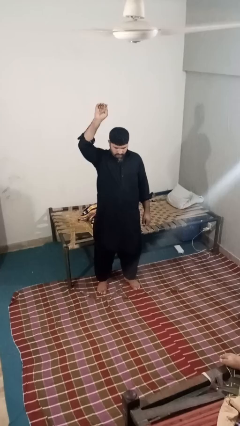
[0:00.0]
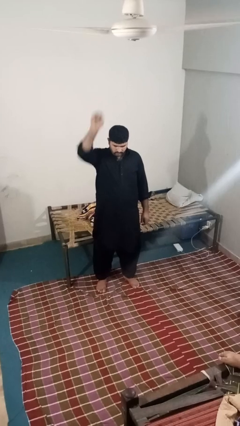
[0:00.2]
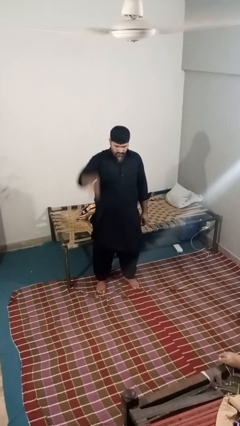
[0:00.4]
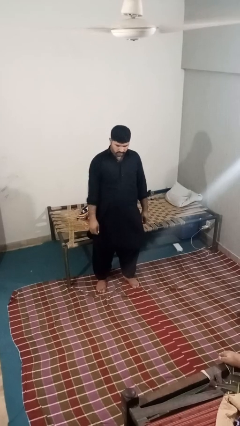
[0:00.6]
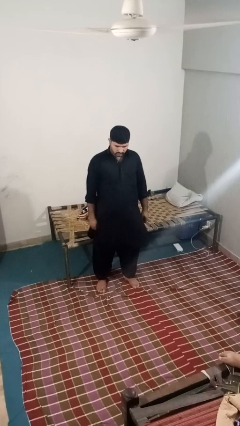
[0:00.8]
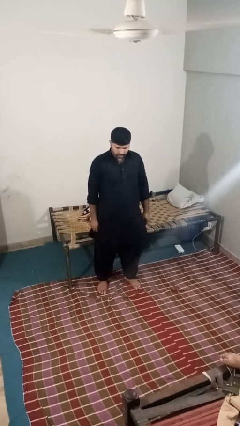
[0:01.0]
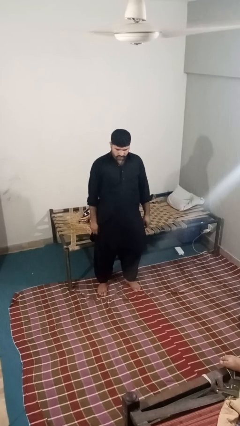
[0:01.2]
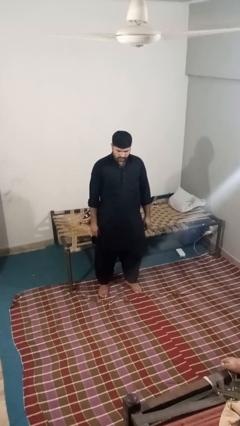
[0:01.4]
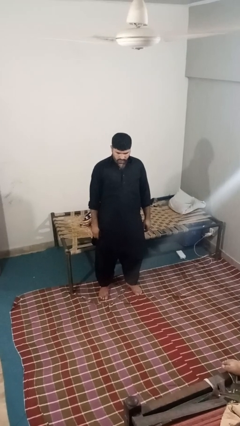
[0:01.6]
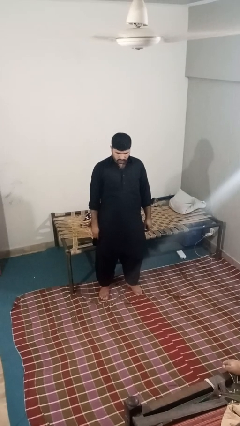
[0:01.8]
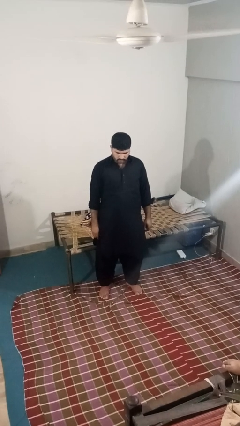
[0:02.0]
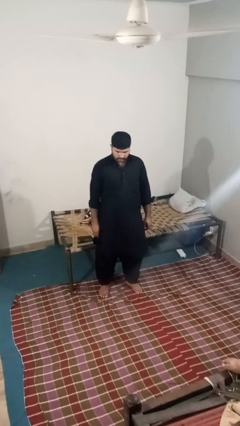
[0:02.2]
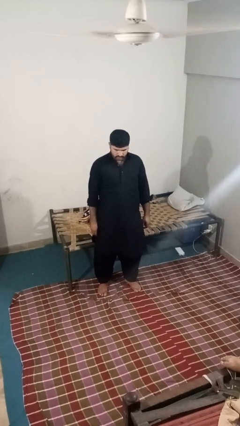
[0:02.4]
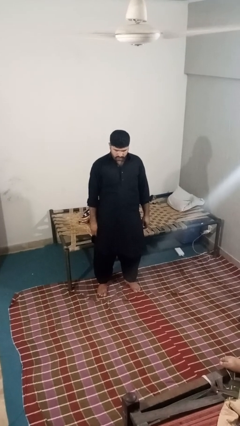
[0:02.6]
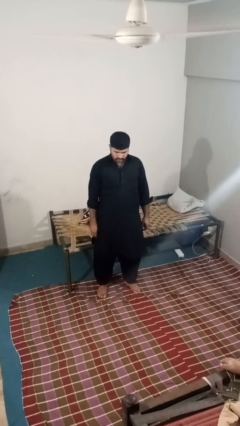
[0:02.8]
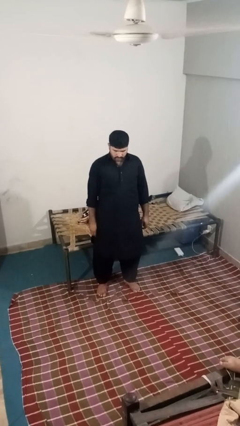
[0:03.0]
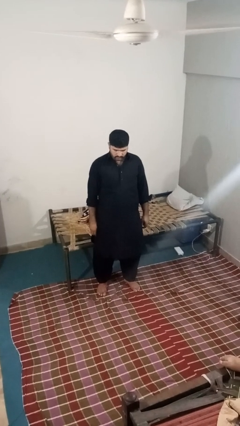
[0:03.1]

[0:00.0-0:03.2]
person gestures swipe down

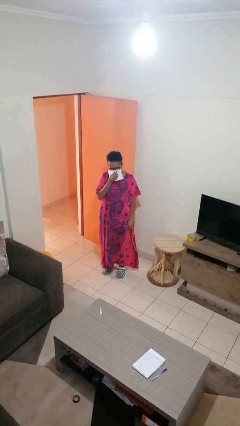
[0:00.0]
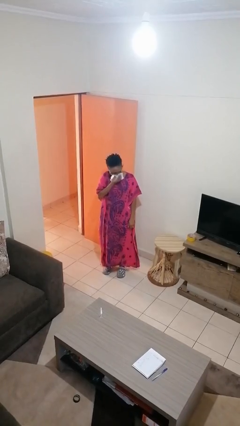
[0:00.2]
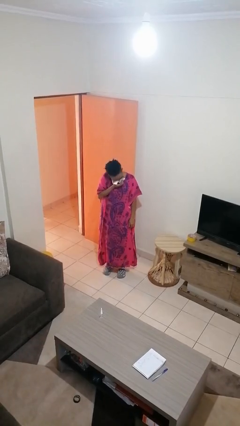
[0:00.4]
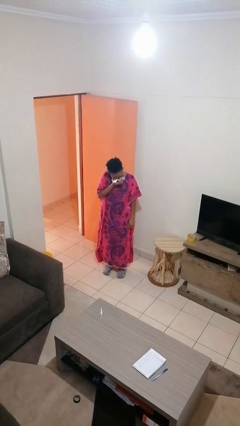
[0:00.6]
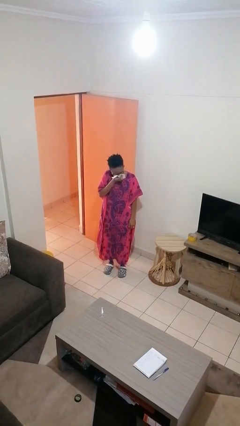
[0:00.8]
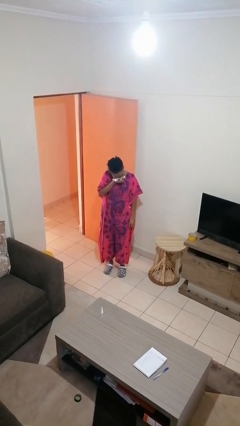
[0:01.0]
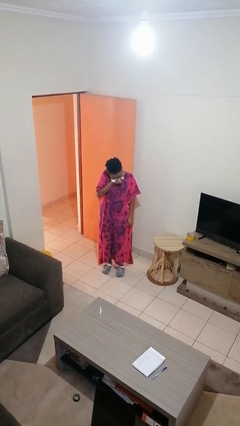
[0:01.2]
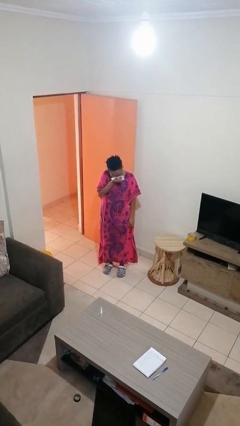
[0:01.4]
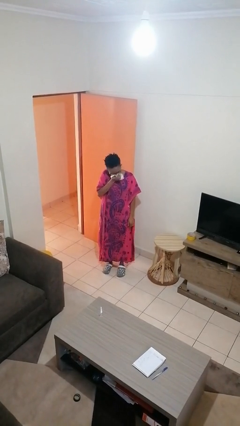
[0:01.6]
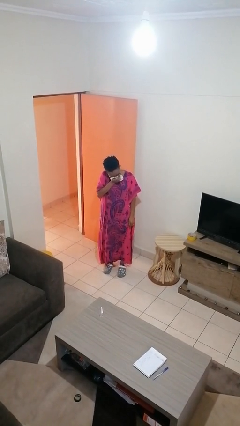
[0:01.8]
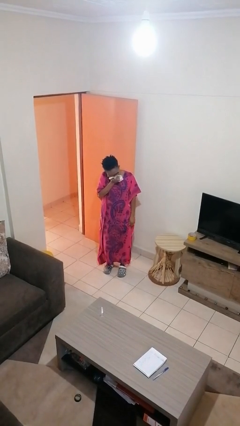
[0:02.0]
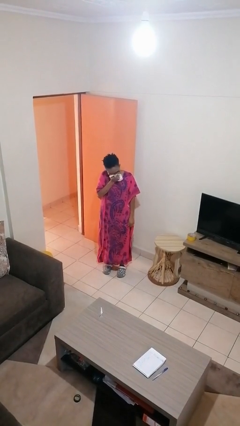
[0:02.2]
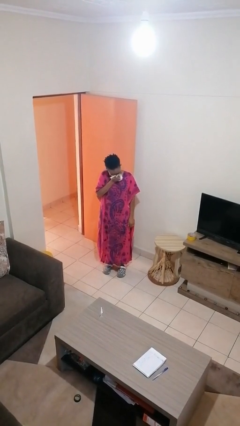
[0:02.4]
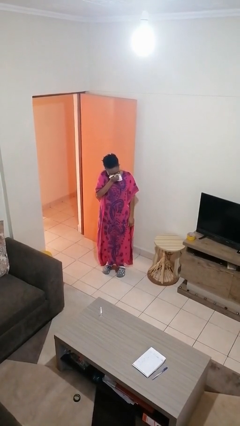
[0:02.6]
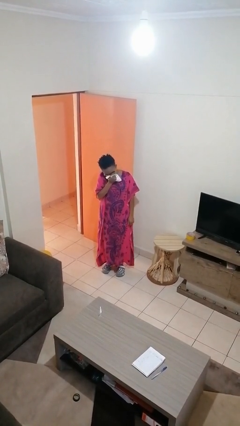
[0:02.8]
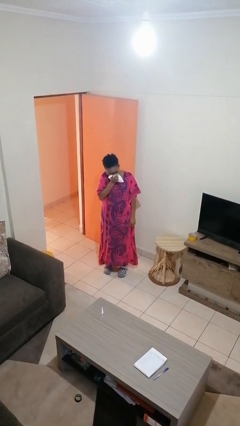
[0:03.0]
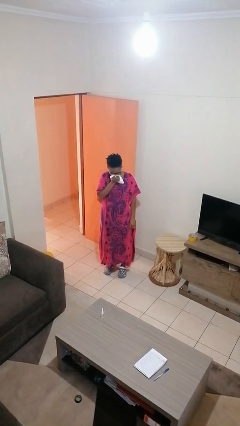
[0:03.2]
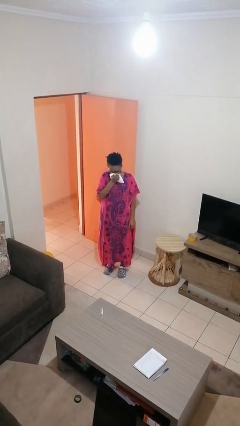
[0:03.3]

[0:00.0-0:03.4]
person blows nose

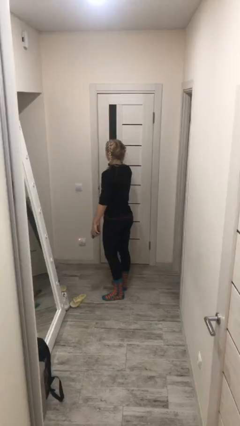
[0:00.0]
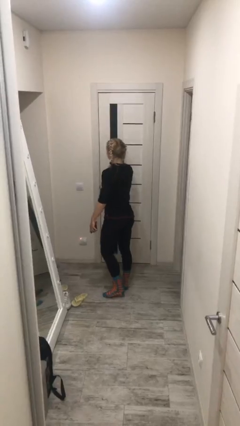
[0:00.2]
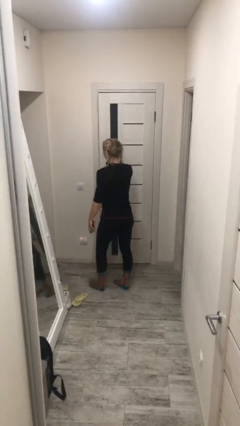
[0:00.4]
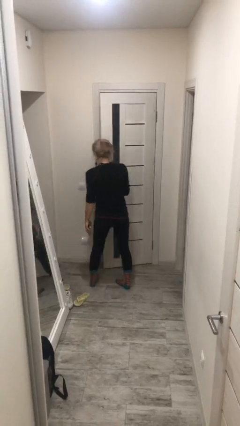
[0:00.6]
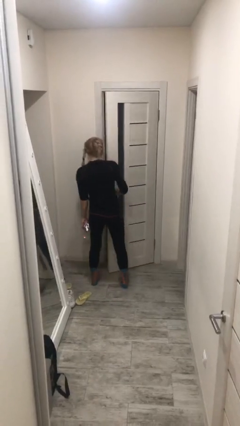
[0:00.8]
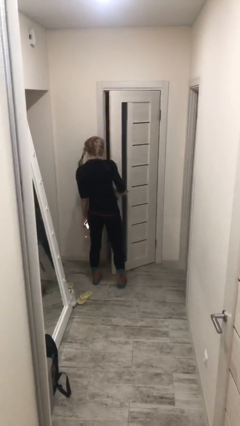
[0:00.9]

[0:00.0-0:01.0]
person opens facility door

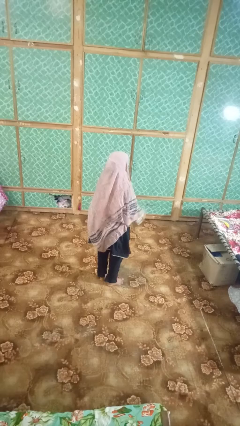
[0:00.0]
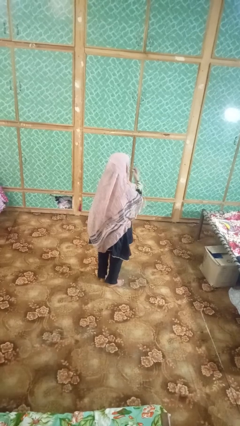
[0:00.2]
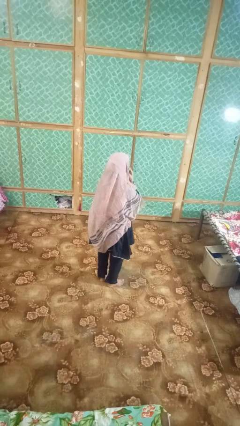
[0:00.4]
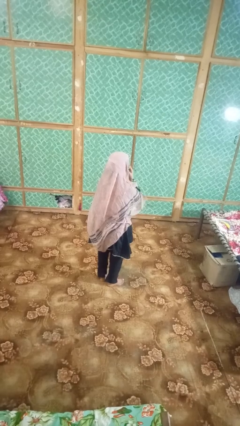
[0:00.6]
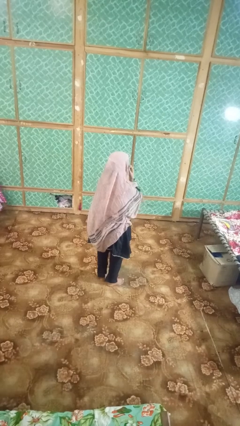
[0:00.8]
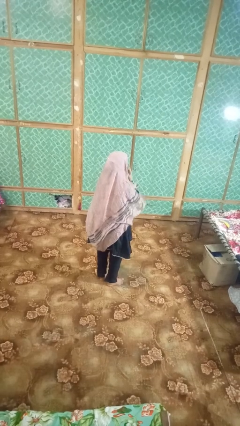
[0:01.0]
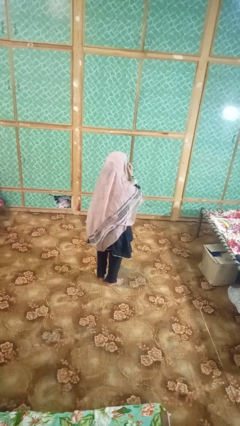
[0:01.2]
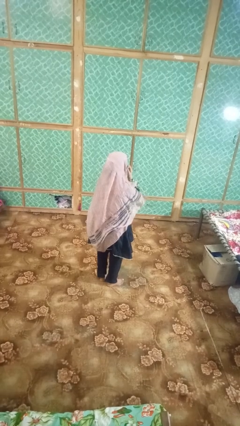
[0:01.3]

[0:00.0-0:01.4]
person strokes chin

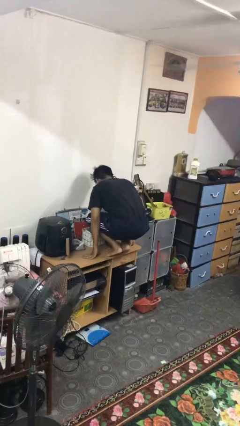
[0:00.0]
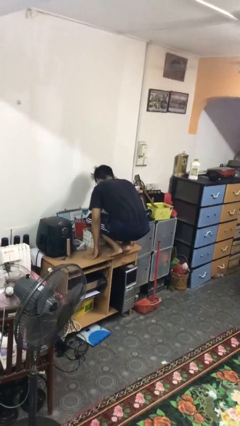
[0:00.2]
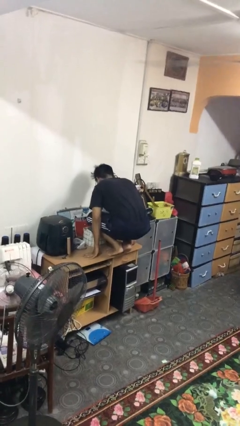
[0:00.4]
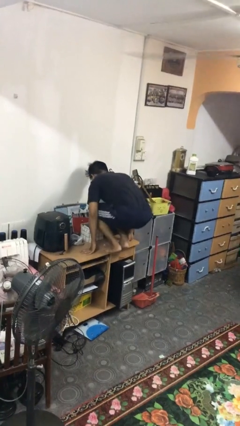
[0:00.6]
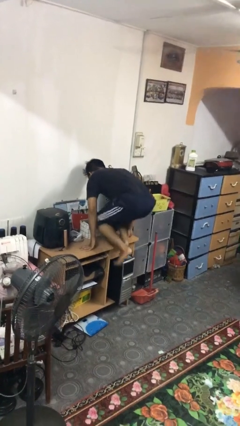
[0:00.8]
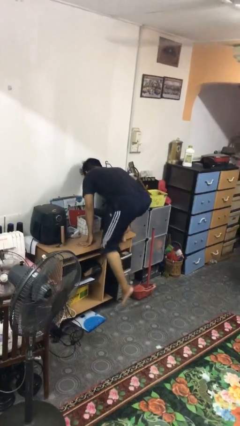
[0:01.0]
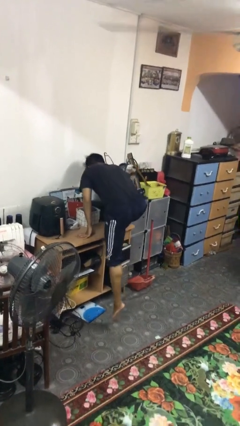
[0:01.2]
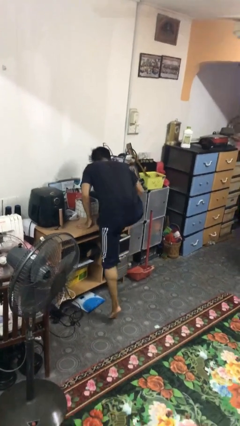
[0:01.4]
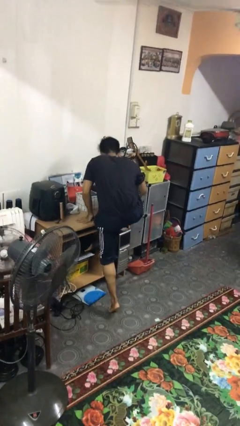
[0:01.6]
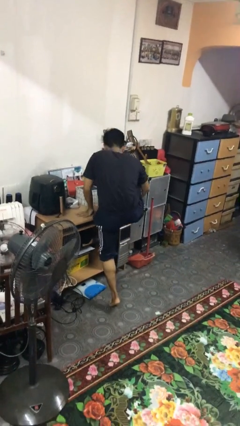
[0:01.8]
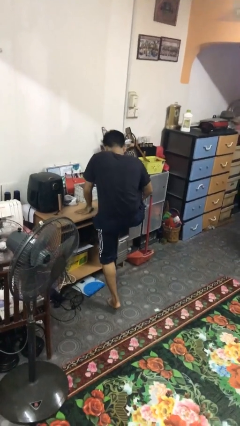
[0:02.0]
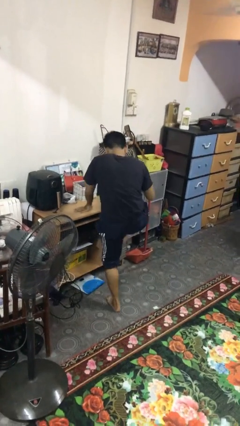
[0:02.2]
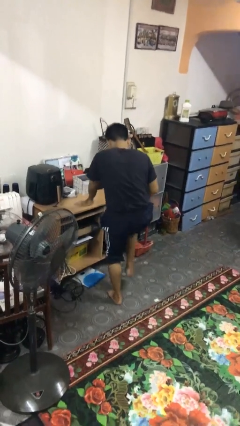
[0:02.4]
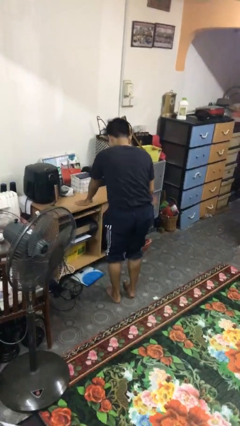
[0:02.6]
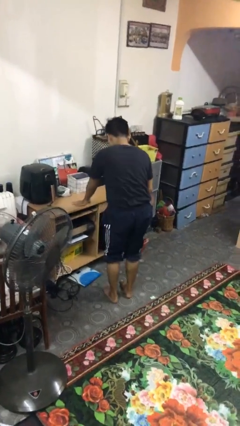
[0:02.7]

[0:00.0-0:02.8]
person climbs off table

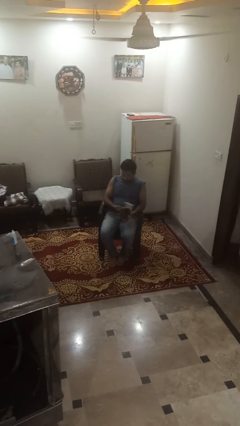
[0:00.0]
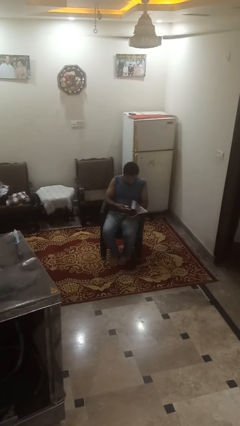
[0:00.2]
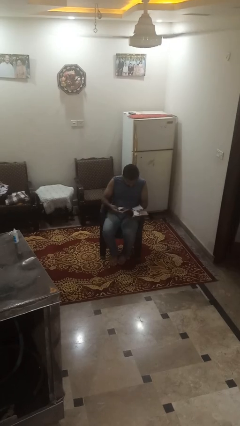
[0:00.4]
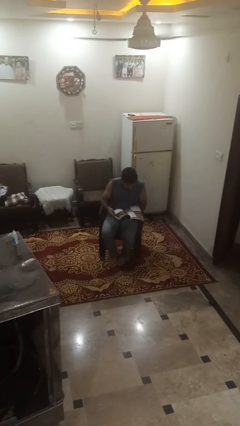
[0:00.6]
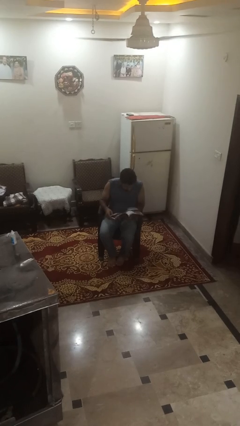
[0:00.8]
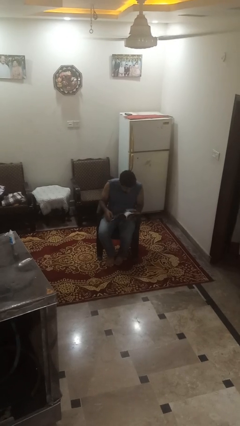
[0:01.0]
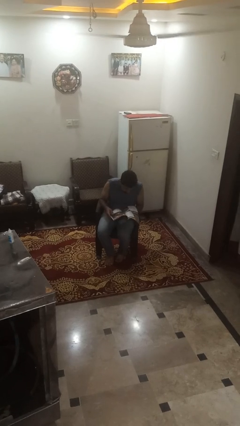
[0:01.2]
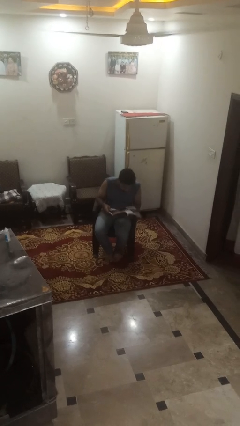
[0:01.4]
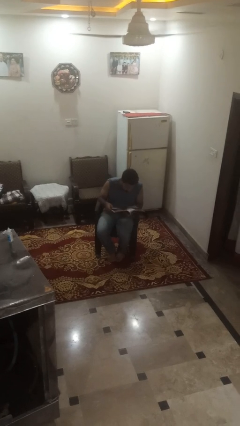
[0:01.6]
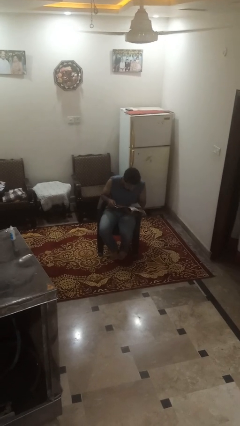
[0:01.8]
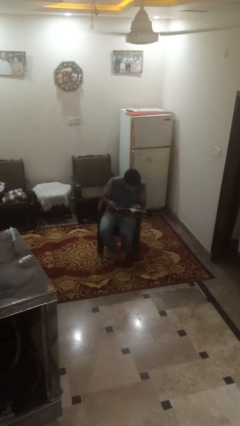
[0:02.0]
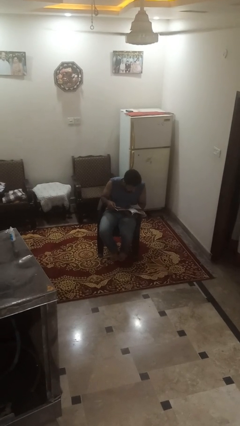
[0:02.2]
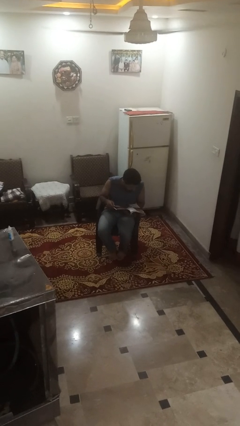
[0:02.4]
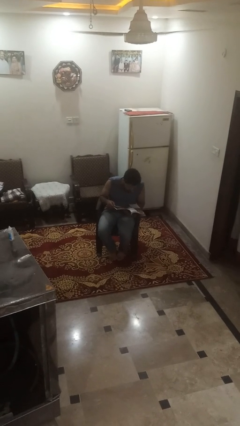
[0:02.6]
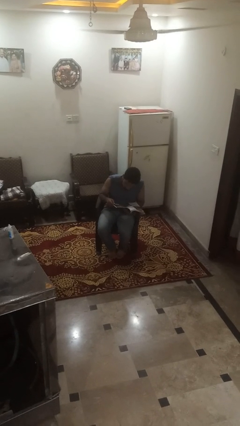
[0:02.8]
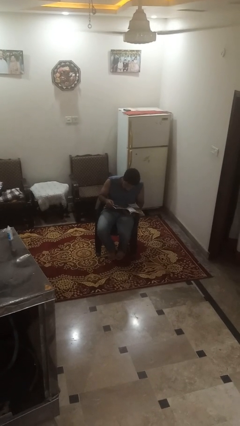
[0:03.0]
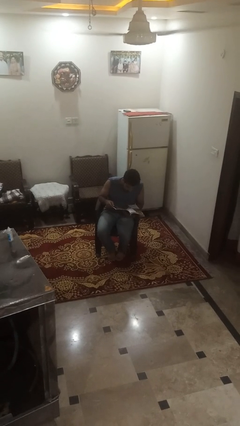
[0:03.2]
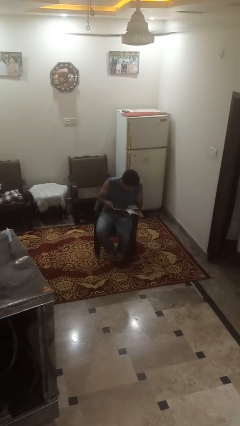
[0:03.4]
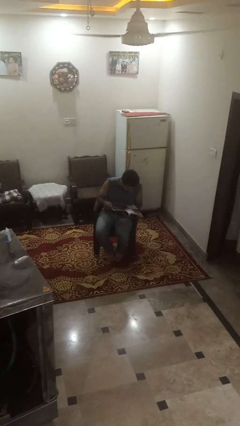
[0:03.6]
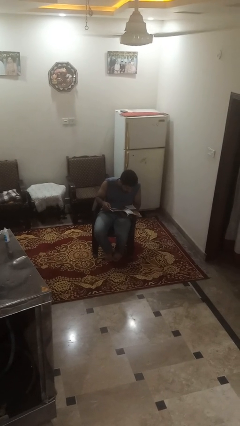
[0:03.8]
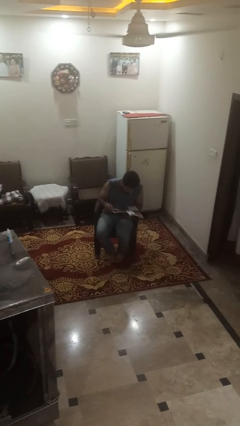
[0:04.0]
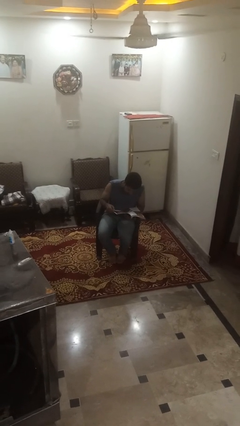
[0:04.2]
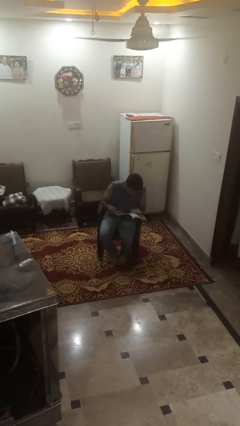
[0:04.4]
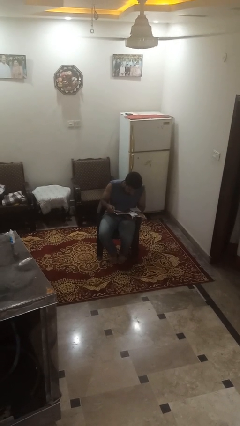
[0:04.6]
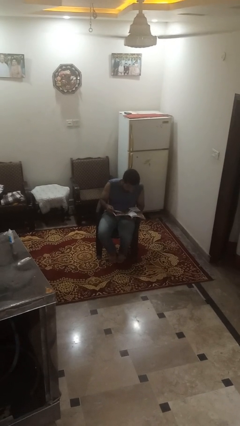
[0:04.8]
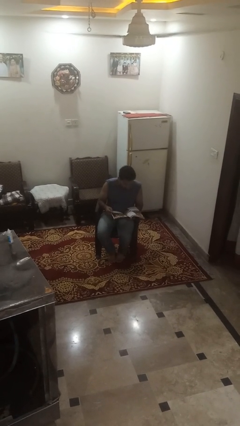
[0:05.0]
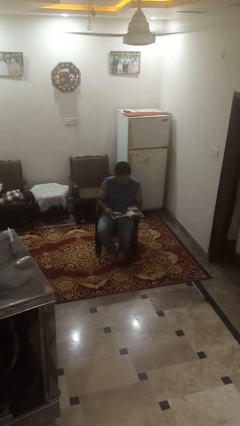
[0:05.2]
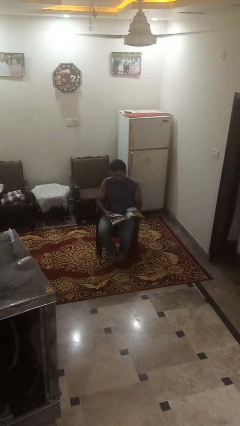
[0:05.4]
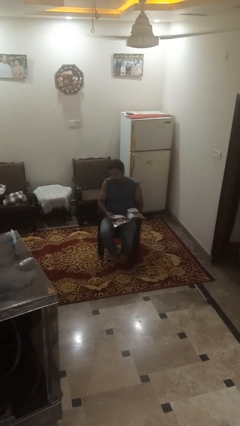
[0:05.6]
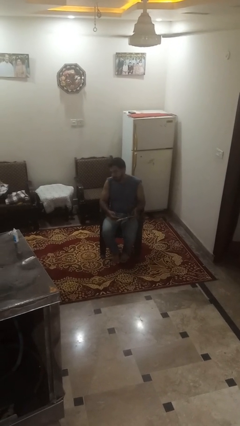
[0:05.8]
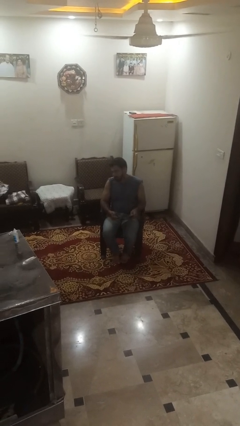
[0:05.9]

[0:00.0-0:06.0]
person reads magazine
